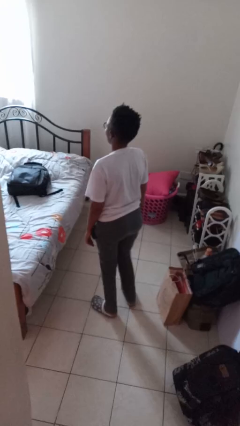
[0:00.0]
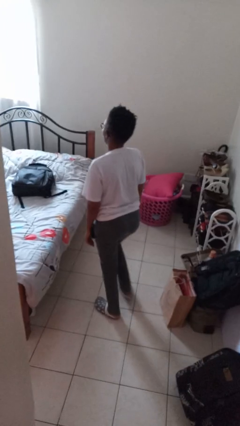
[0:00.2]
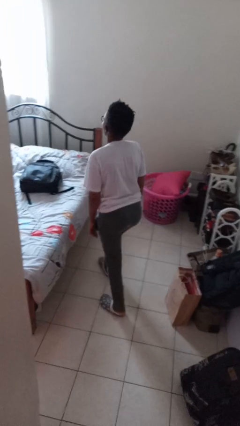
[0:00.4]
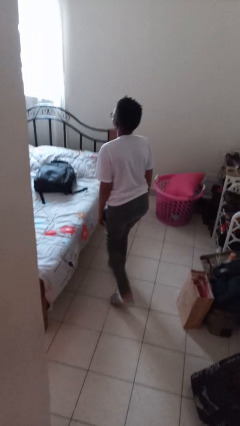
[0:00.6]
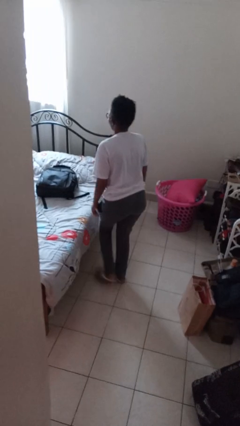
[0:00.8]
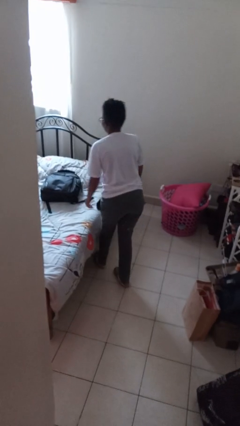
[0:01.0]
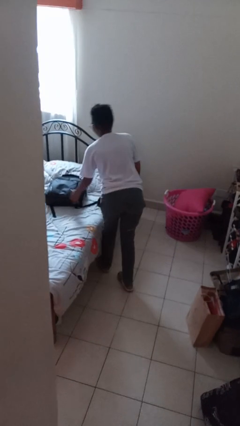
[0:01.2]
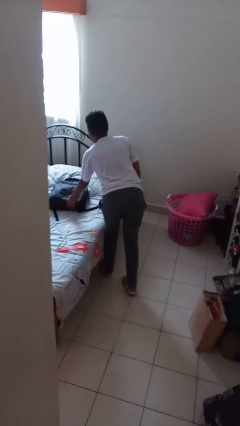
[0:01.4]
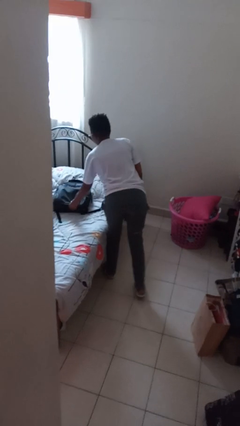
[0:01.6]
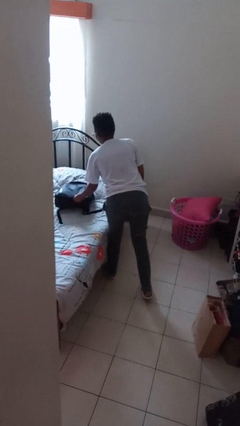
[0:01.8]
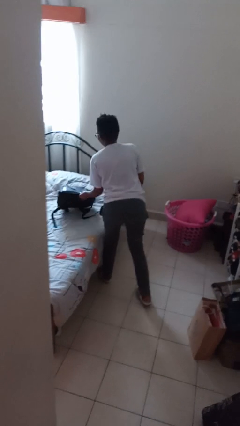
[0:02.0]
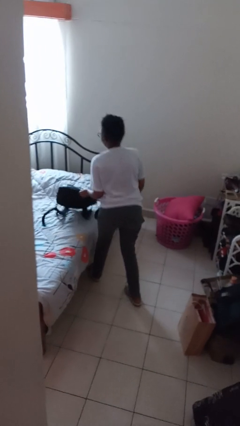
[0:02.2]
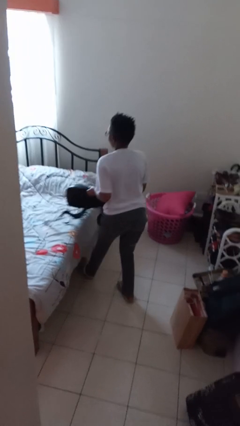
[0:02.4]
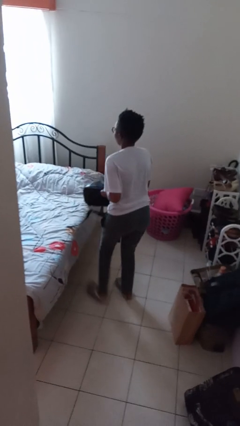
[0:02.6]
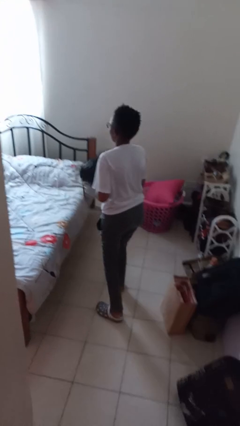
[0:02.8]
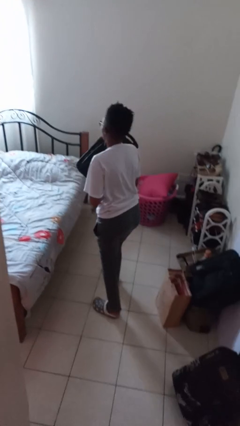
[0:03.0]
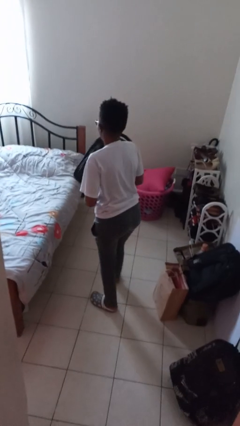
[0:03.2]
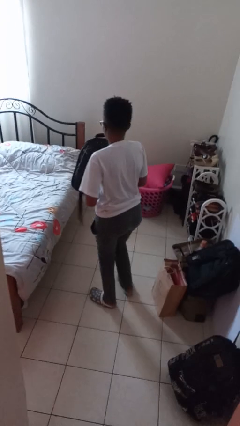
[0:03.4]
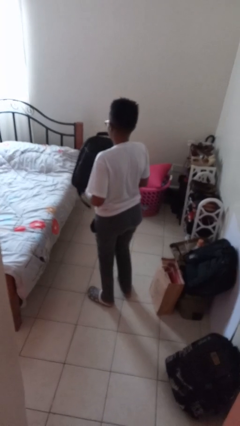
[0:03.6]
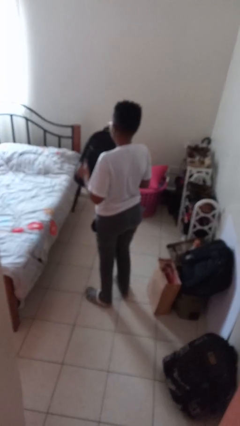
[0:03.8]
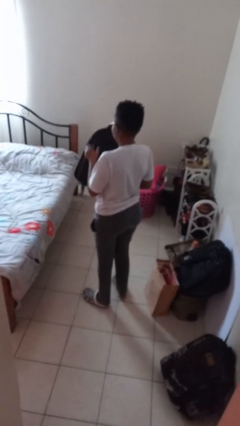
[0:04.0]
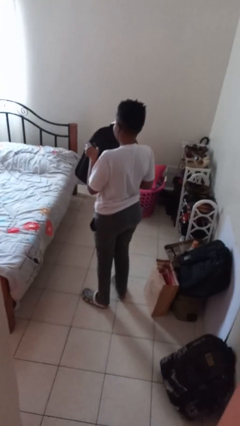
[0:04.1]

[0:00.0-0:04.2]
person picks up object from bed

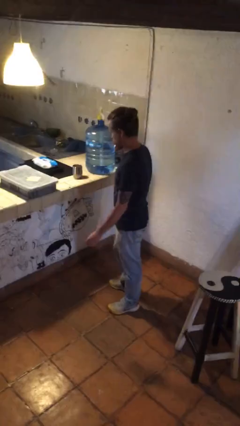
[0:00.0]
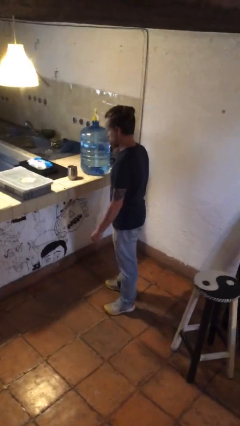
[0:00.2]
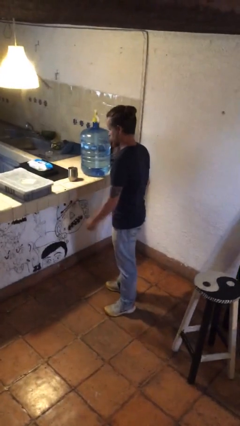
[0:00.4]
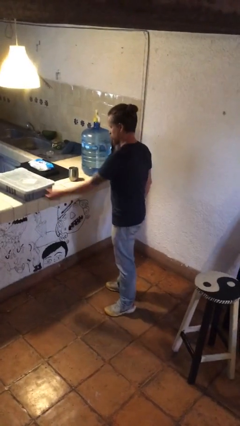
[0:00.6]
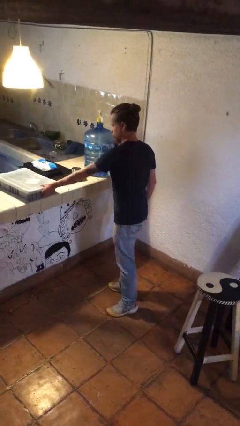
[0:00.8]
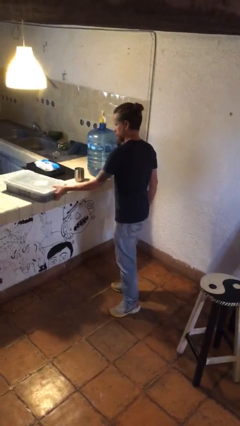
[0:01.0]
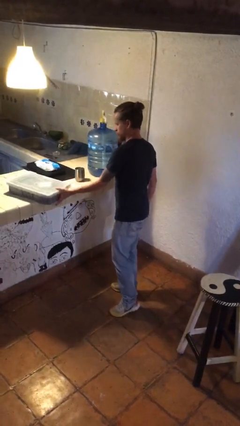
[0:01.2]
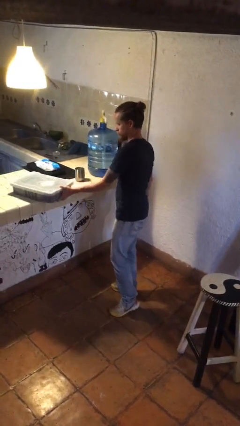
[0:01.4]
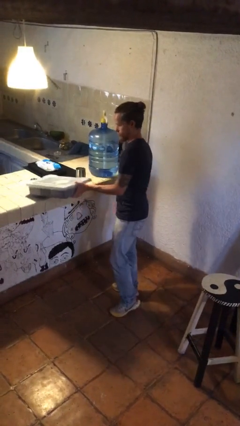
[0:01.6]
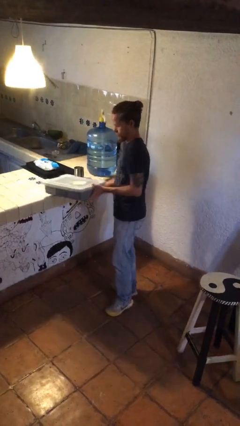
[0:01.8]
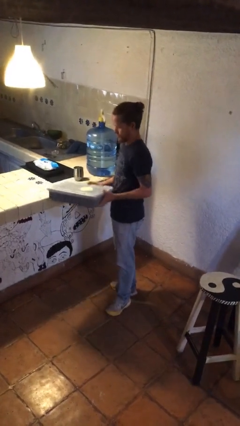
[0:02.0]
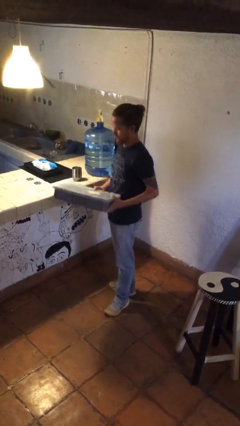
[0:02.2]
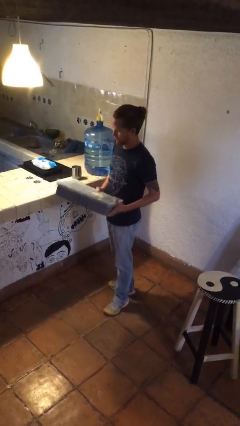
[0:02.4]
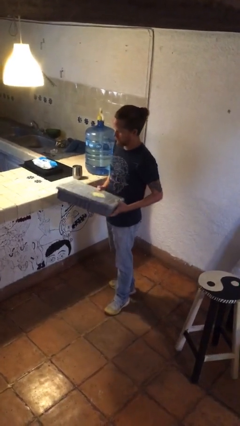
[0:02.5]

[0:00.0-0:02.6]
person picks up object from countertop

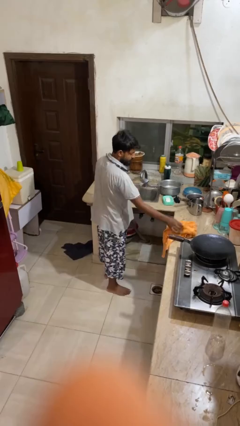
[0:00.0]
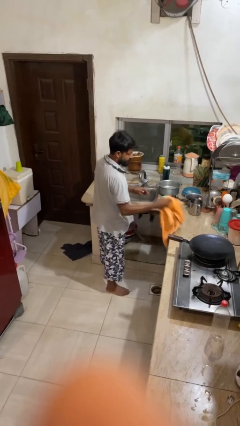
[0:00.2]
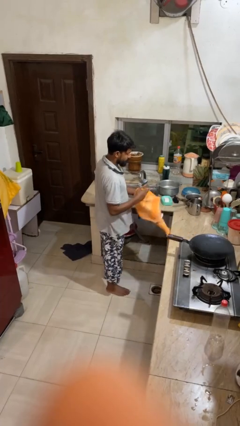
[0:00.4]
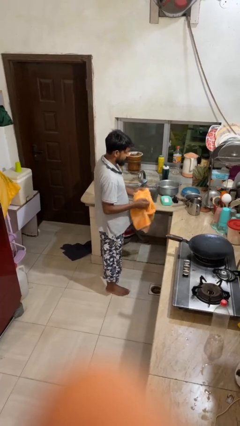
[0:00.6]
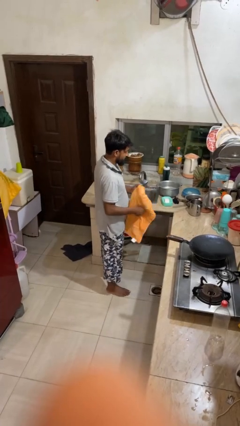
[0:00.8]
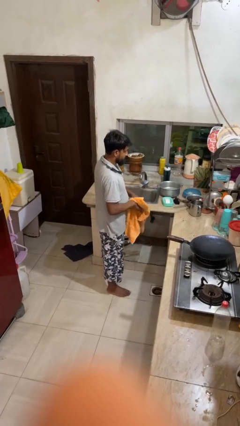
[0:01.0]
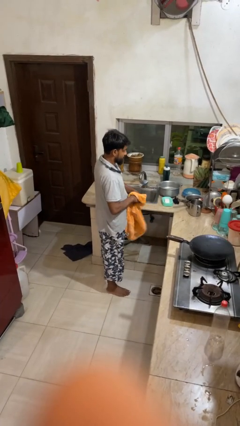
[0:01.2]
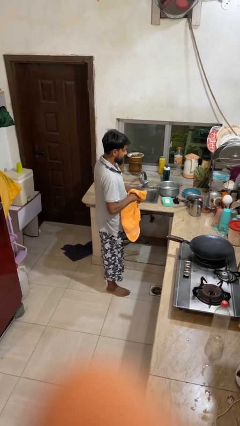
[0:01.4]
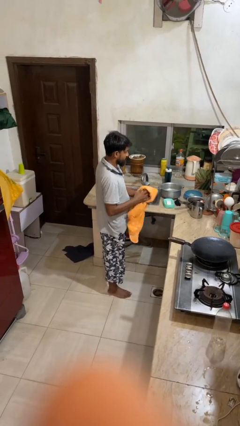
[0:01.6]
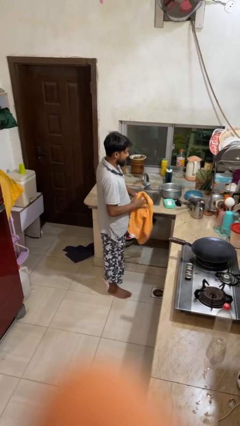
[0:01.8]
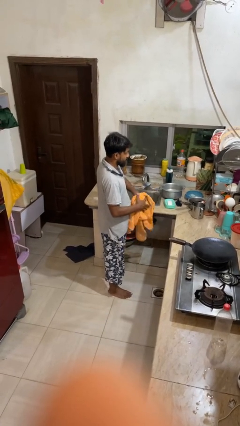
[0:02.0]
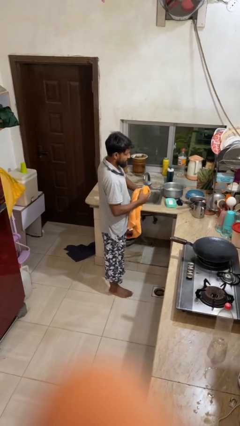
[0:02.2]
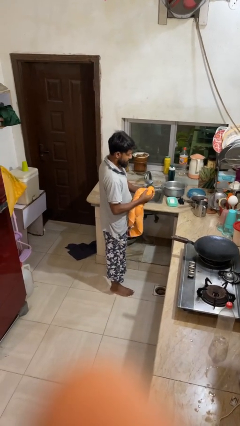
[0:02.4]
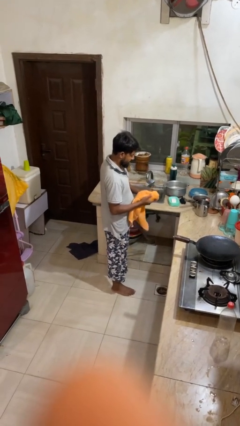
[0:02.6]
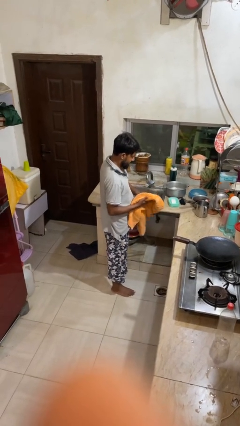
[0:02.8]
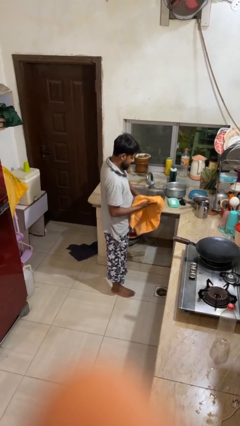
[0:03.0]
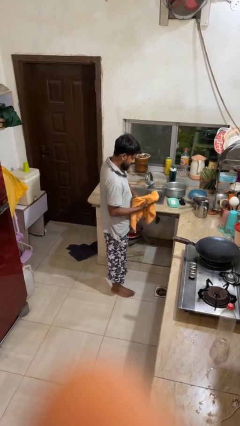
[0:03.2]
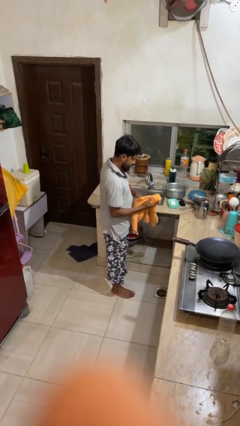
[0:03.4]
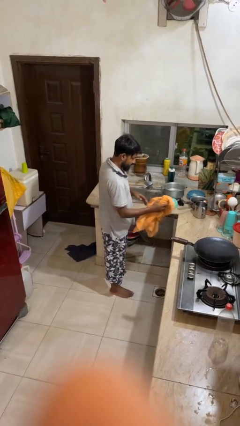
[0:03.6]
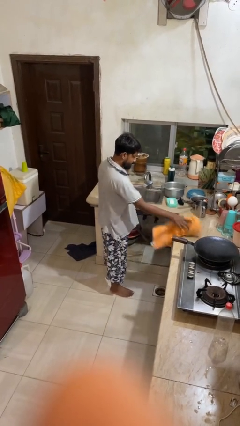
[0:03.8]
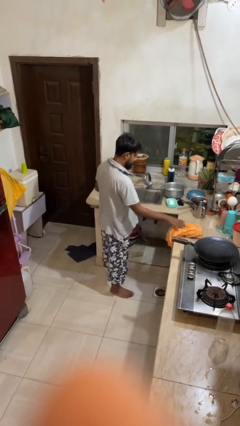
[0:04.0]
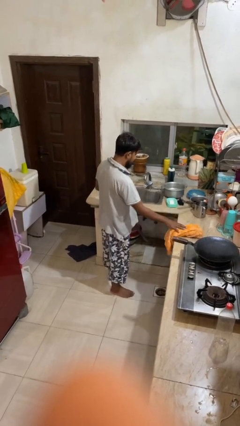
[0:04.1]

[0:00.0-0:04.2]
person dries hands with towel

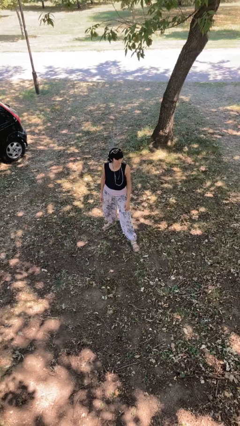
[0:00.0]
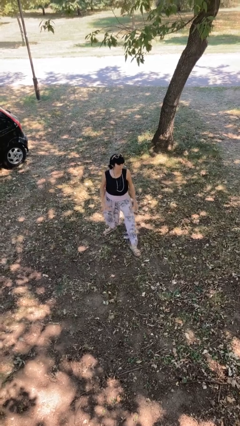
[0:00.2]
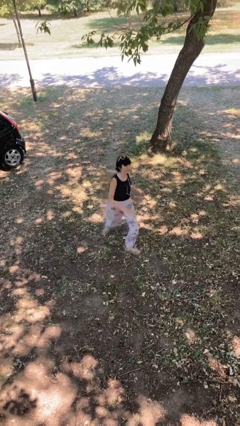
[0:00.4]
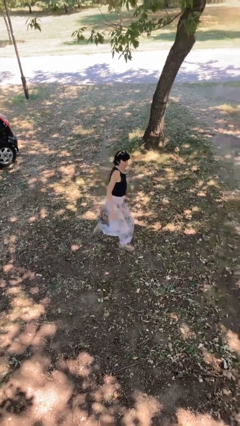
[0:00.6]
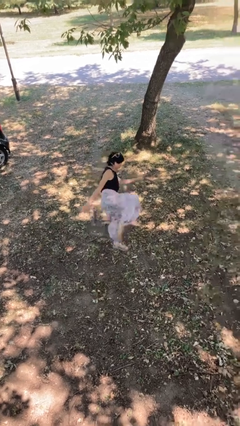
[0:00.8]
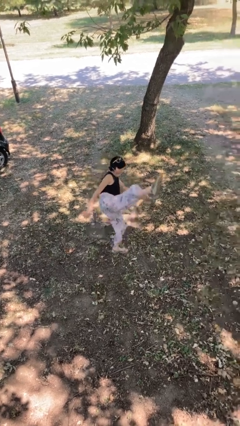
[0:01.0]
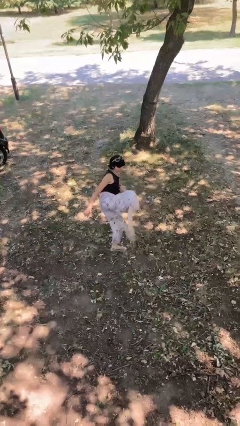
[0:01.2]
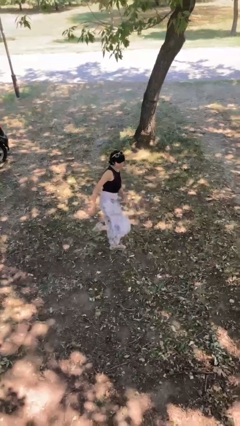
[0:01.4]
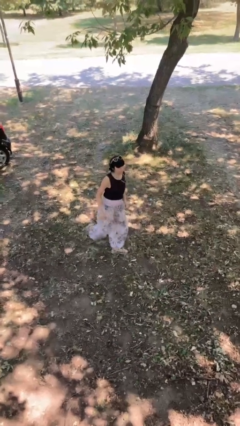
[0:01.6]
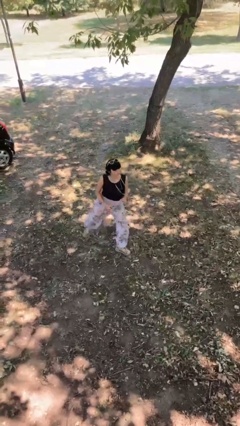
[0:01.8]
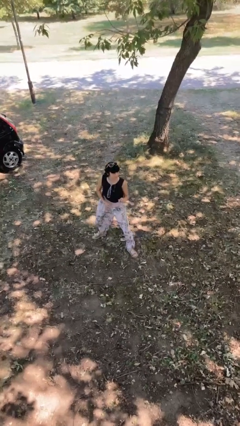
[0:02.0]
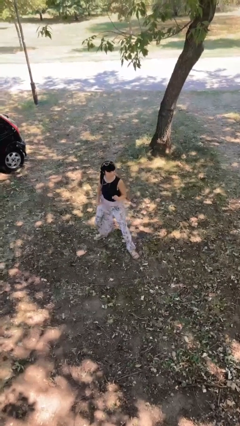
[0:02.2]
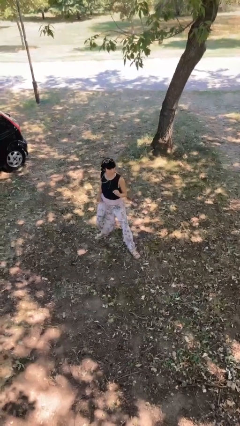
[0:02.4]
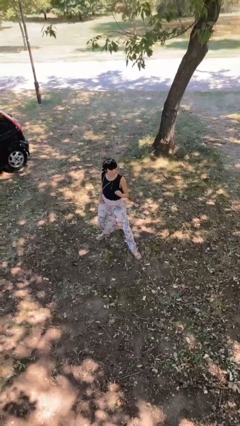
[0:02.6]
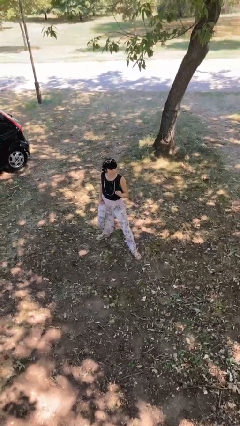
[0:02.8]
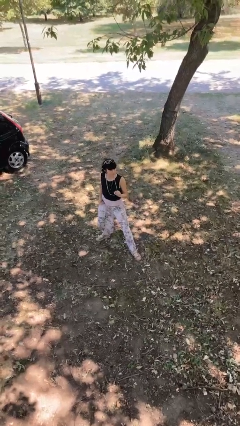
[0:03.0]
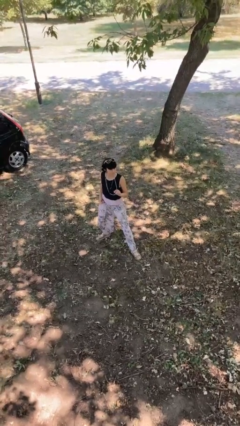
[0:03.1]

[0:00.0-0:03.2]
person karate kicks

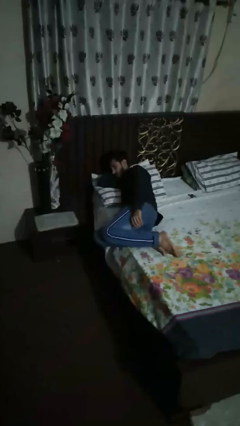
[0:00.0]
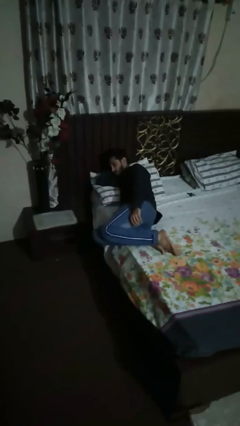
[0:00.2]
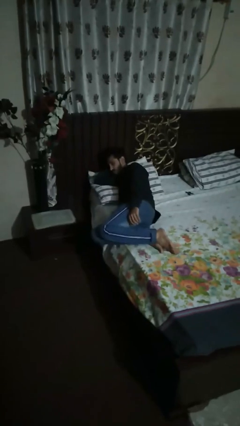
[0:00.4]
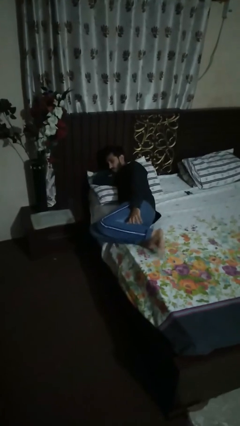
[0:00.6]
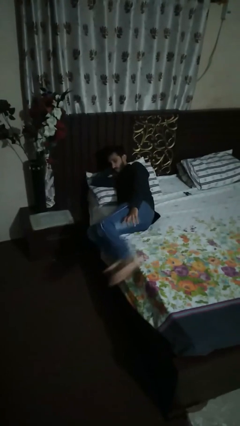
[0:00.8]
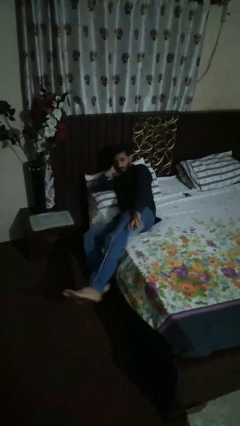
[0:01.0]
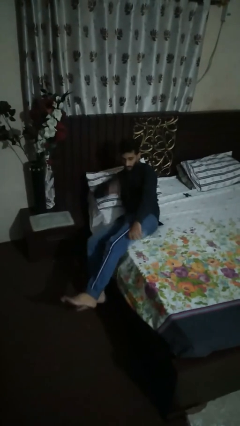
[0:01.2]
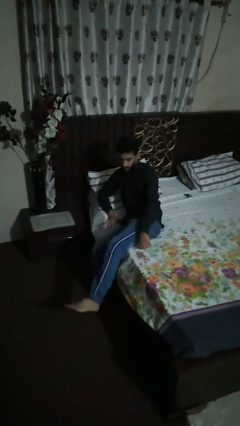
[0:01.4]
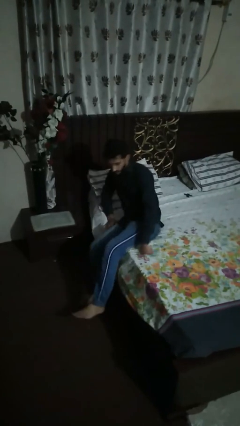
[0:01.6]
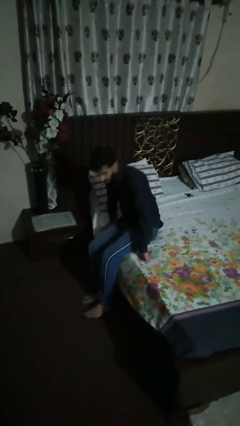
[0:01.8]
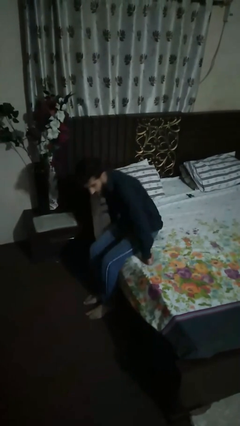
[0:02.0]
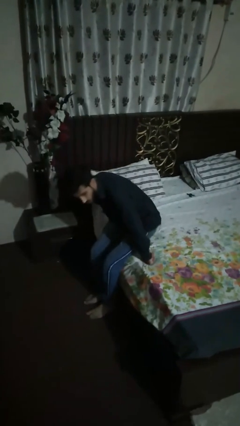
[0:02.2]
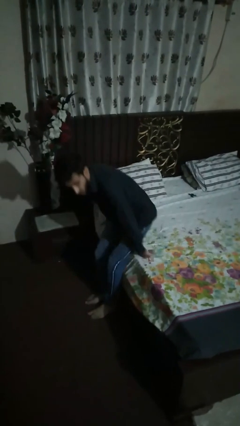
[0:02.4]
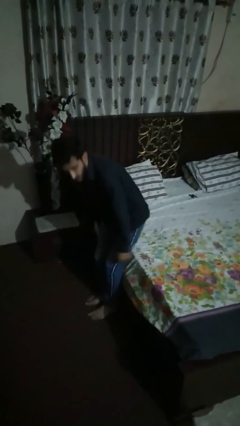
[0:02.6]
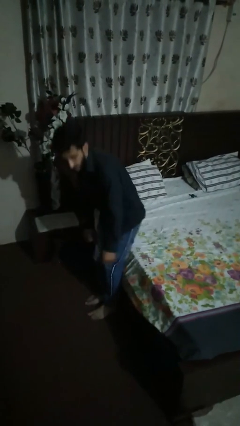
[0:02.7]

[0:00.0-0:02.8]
person stands up

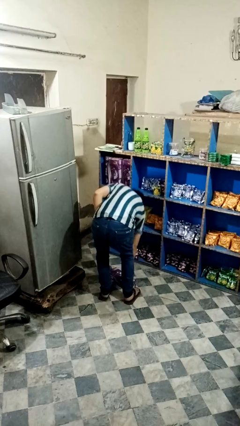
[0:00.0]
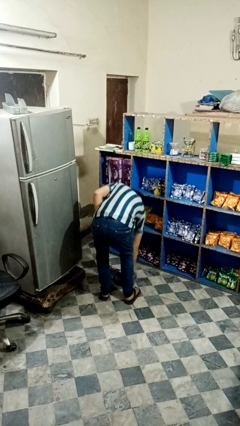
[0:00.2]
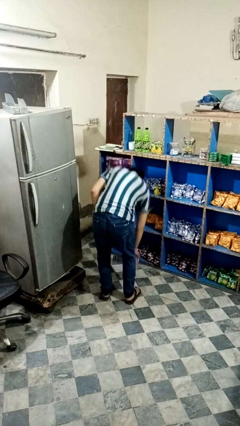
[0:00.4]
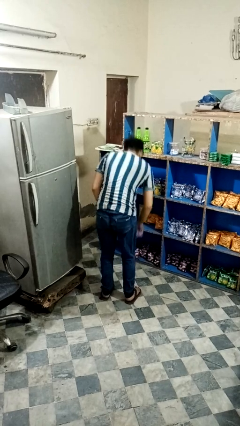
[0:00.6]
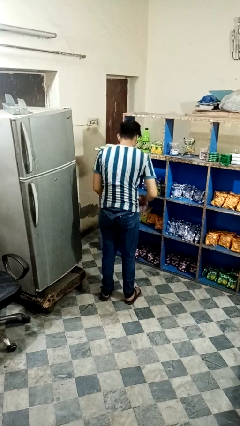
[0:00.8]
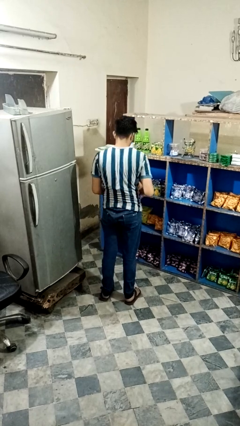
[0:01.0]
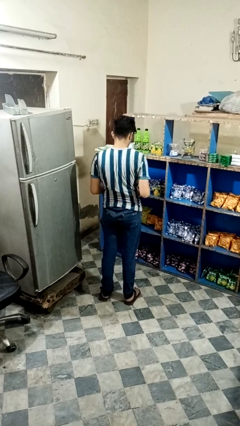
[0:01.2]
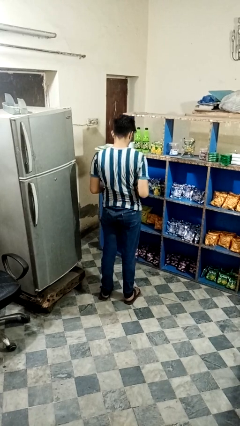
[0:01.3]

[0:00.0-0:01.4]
person picks up object from floor
